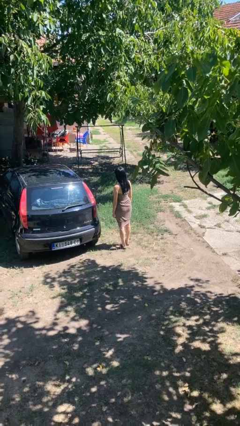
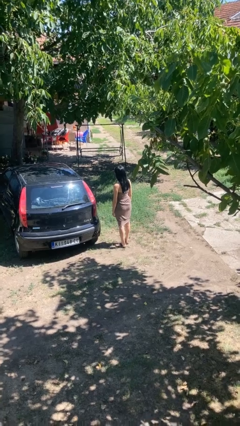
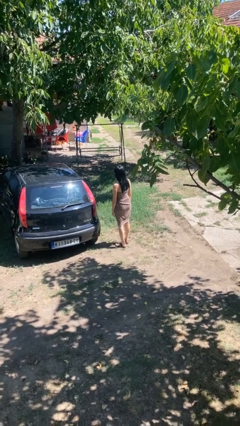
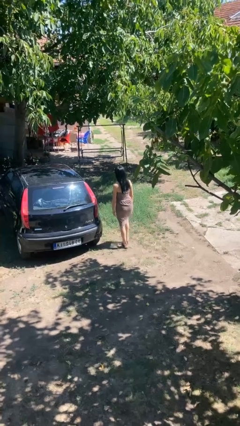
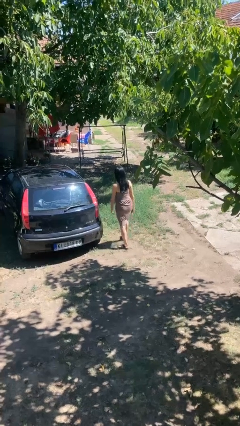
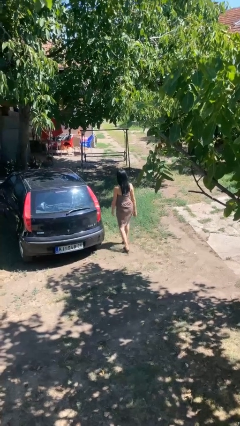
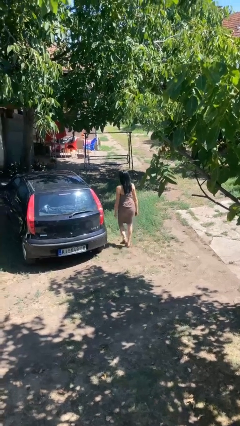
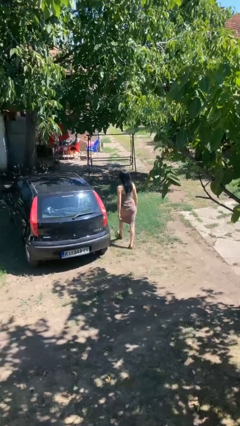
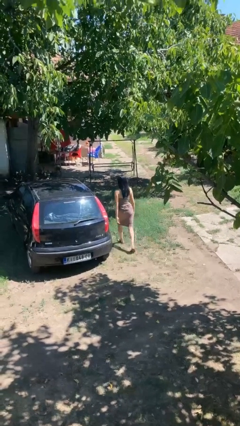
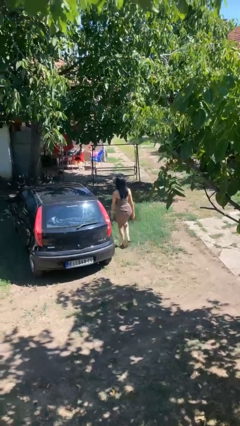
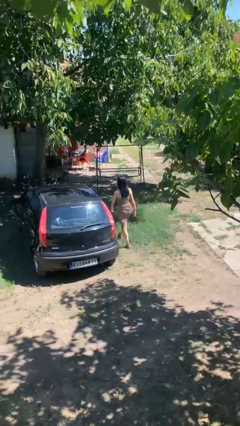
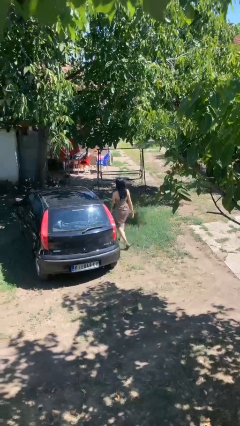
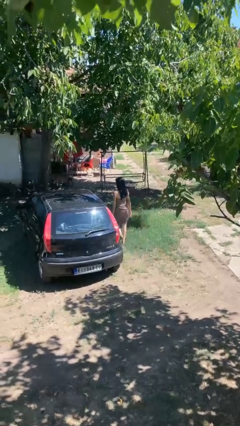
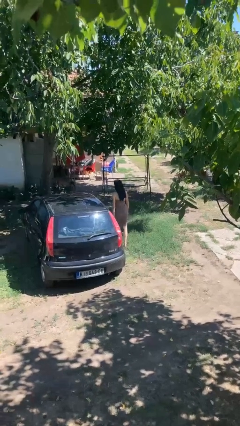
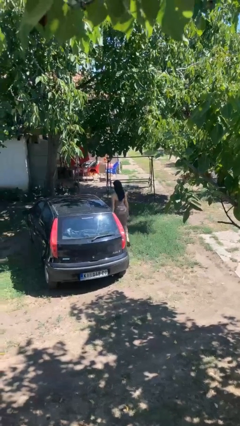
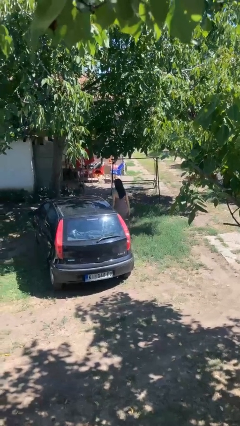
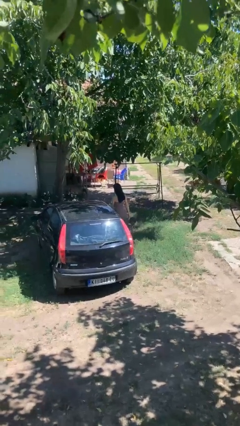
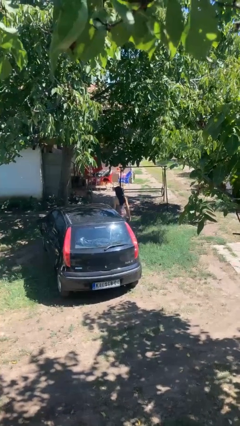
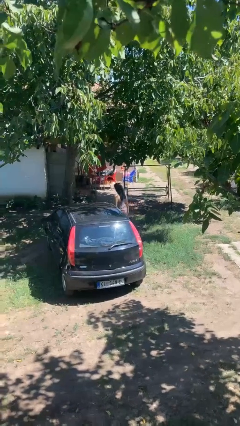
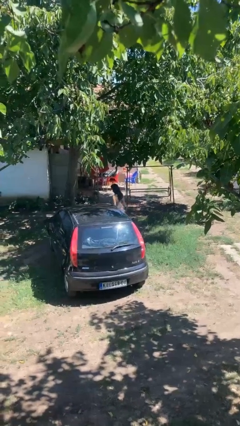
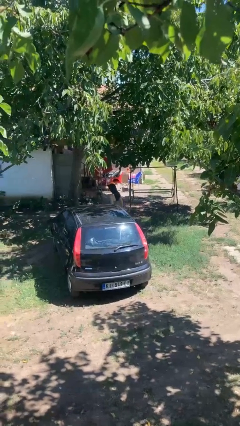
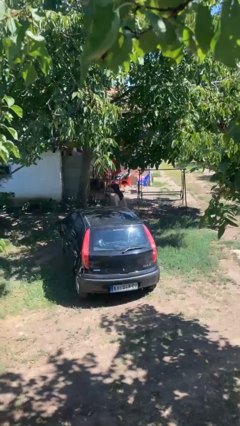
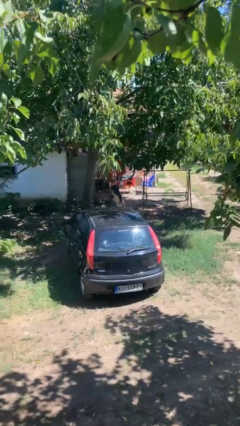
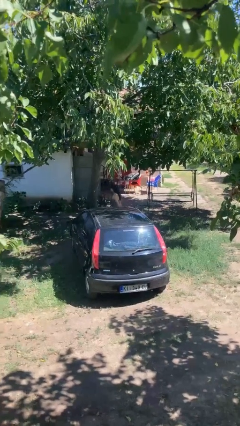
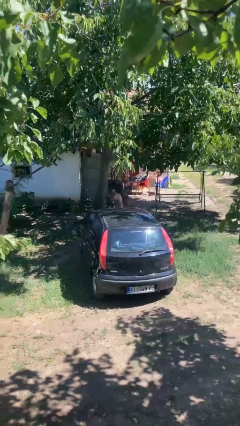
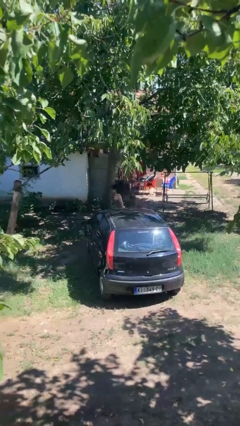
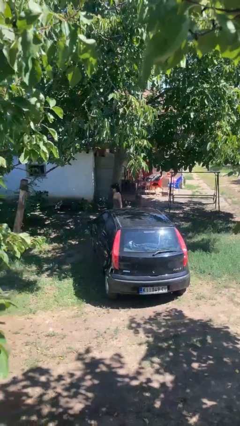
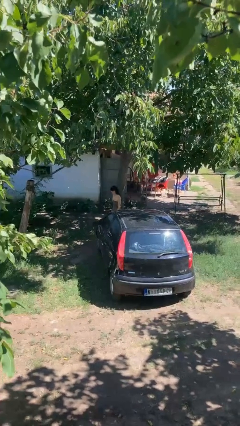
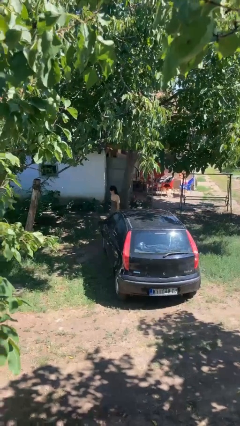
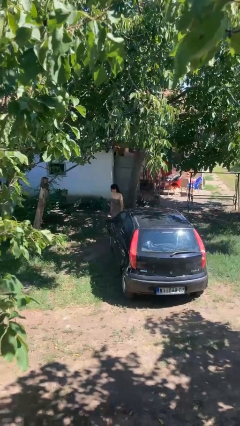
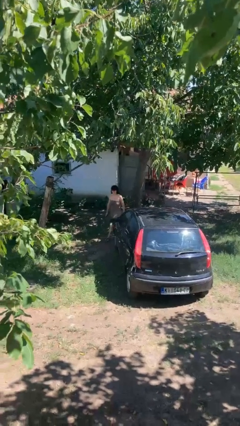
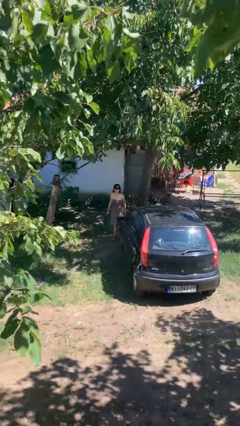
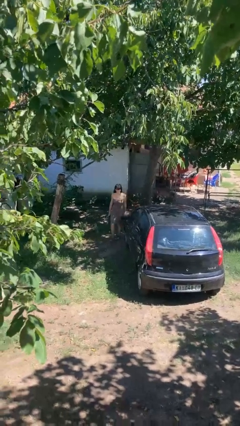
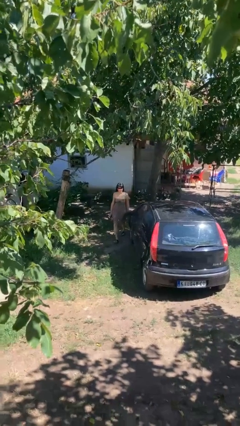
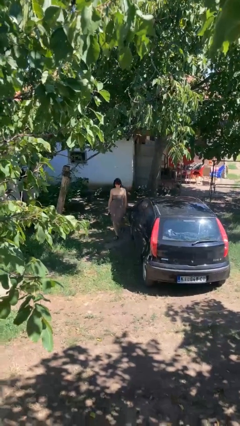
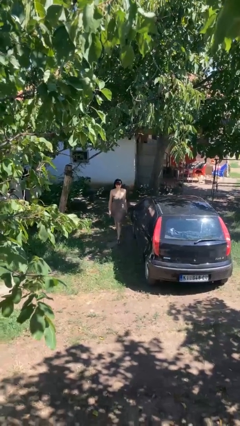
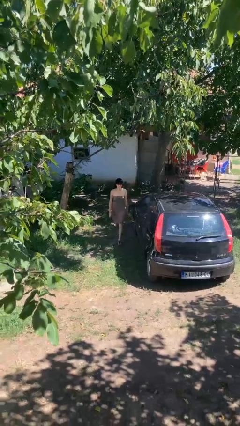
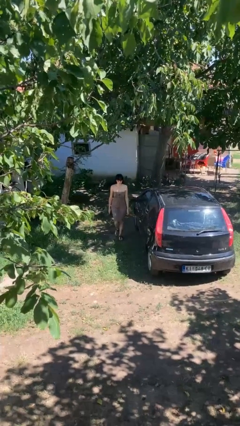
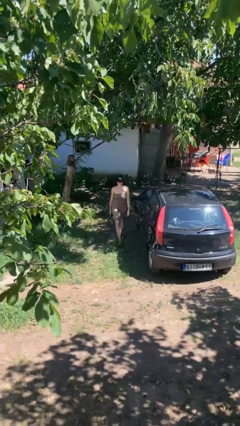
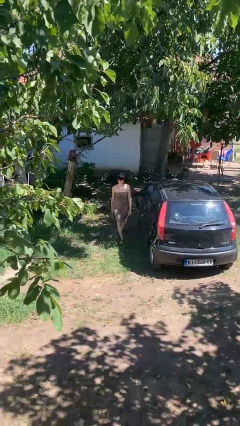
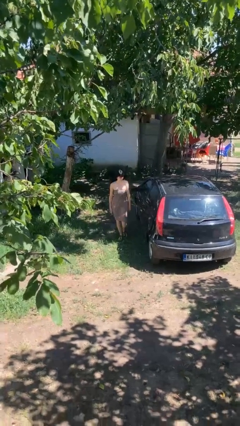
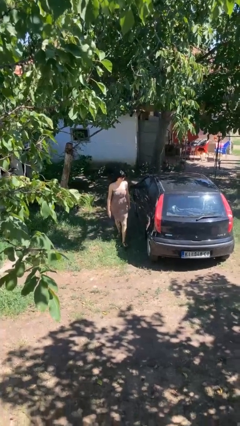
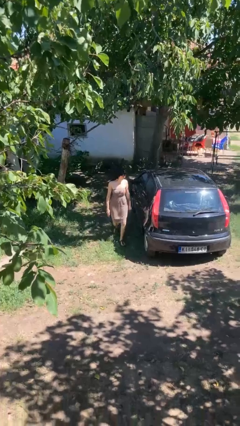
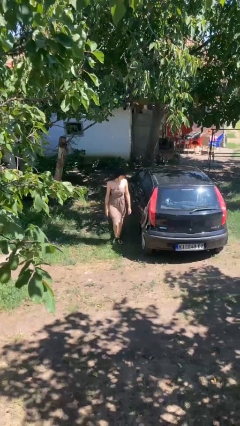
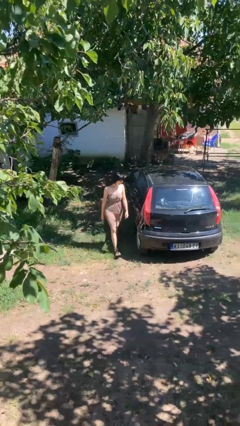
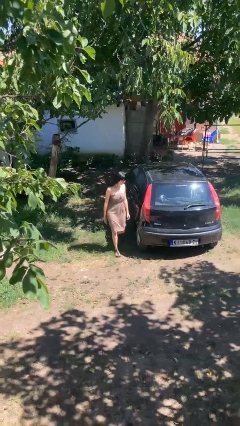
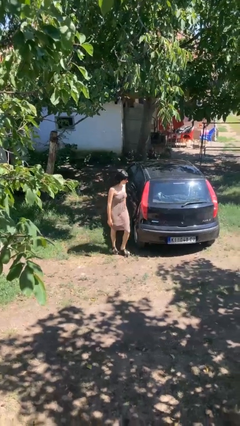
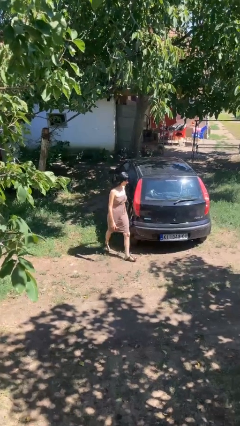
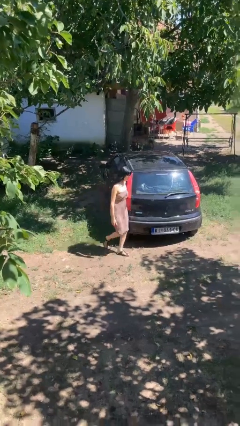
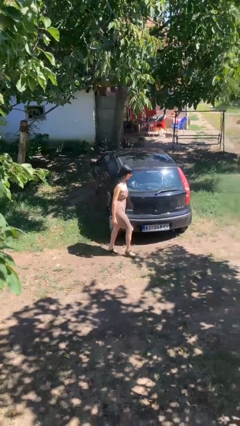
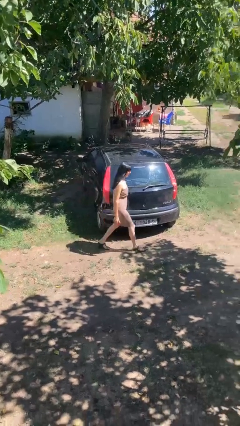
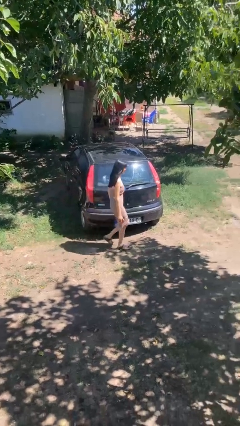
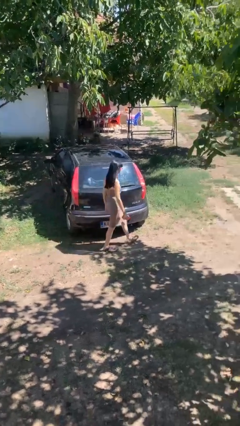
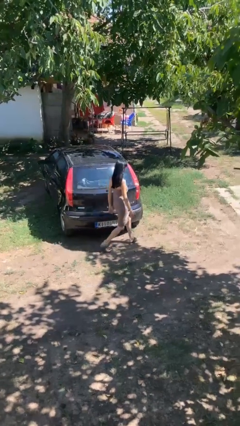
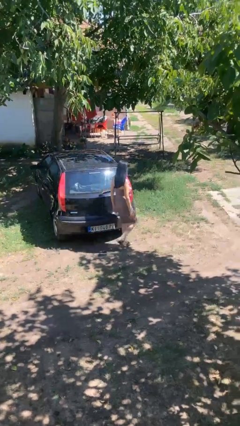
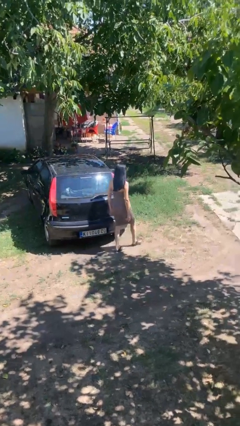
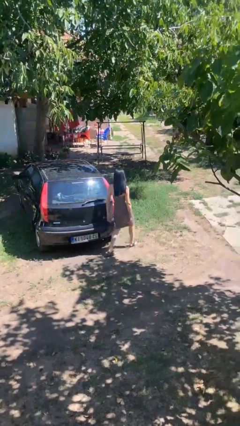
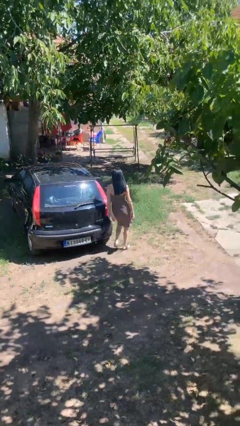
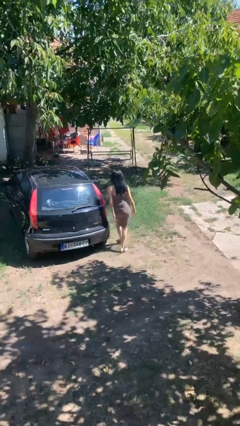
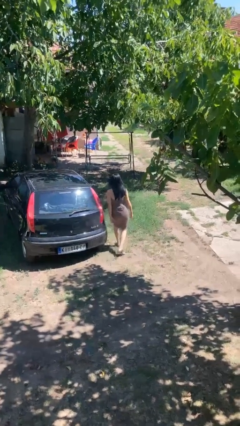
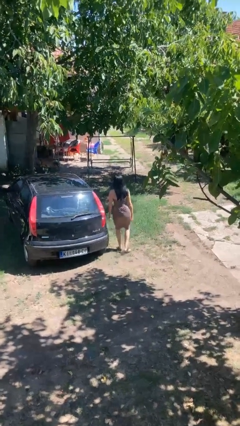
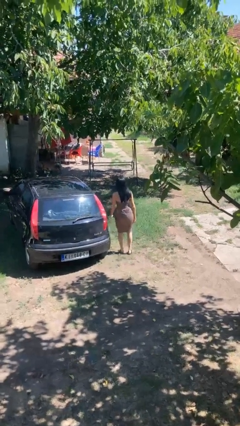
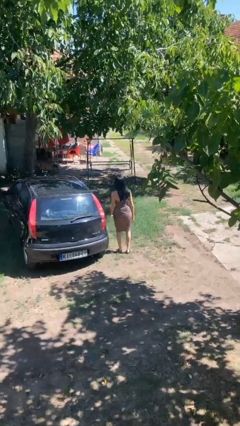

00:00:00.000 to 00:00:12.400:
person walks around car

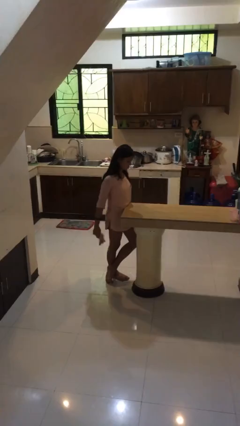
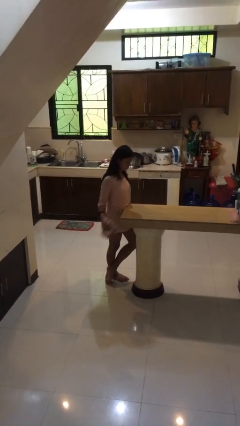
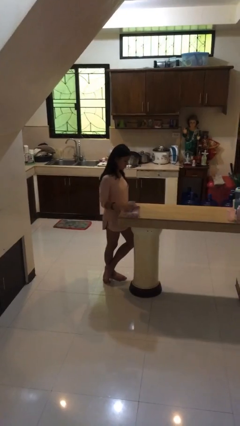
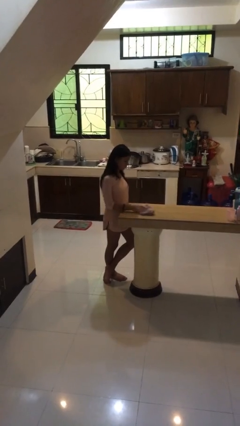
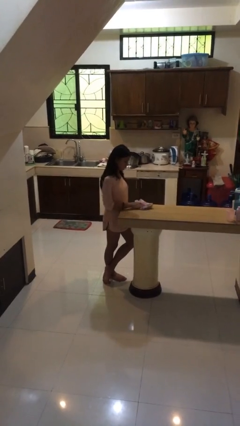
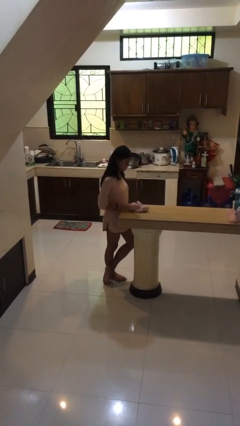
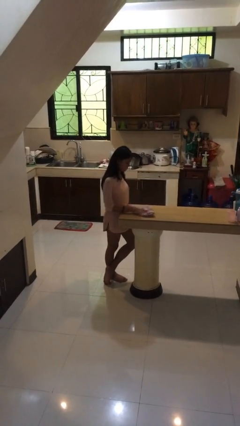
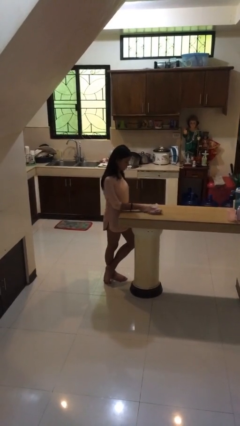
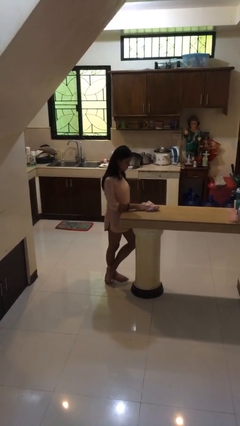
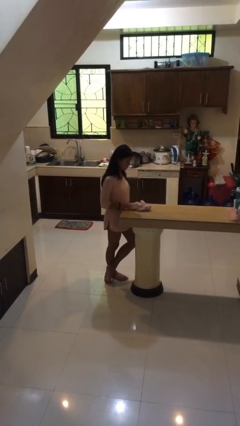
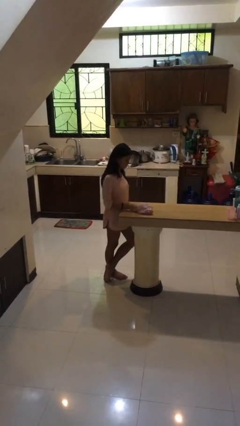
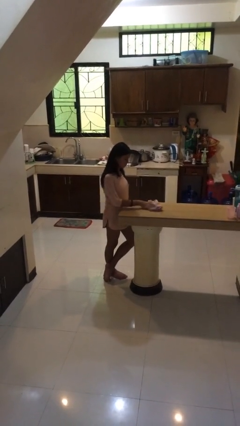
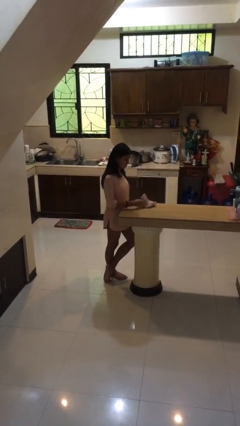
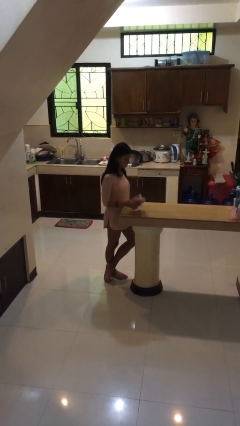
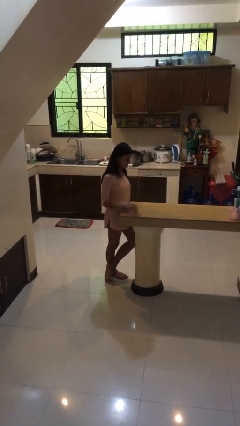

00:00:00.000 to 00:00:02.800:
person cleans table with rag

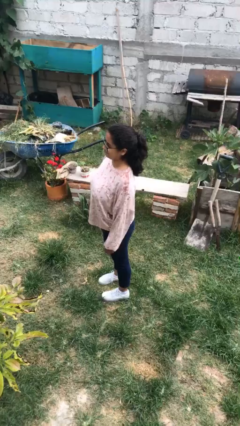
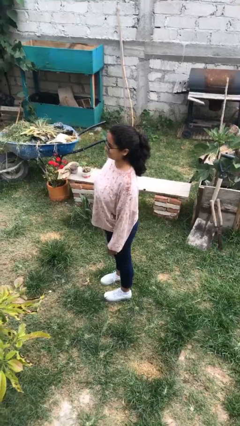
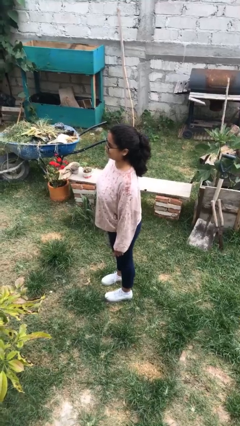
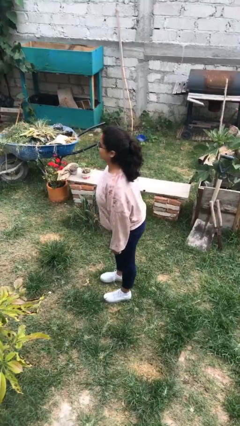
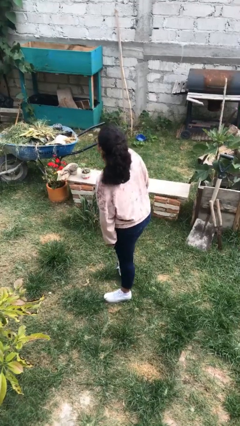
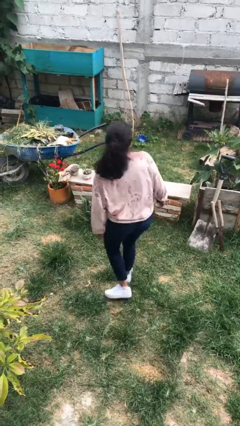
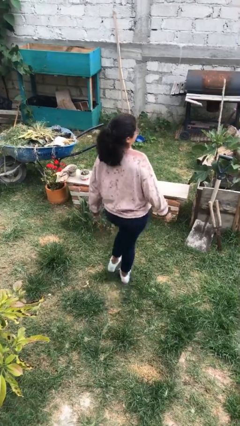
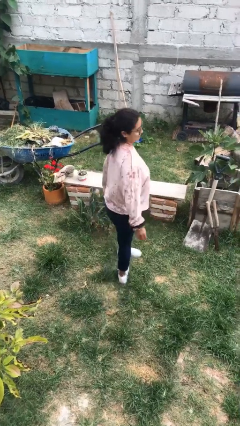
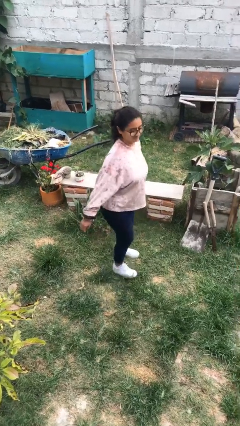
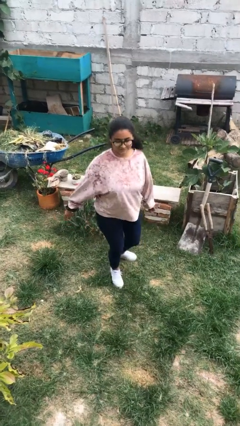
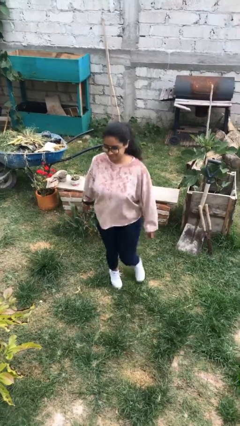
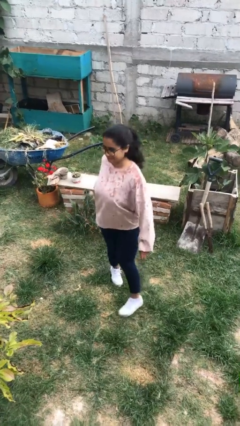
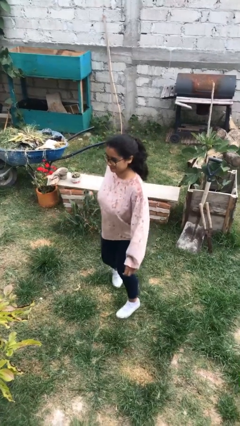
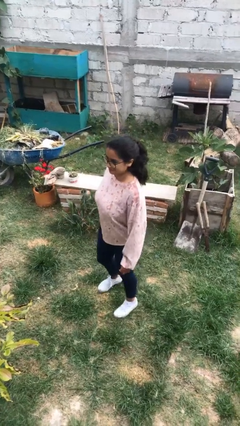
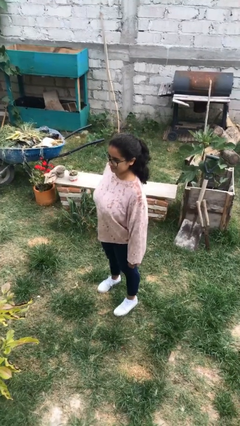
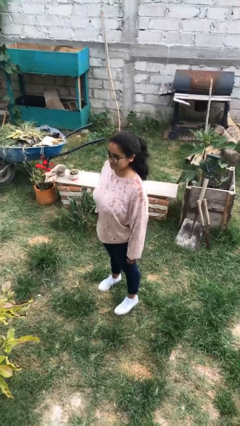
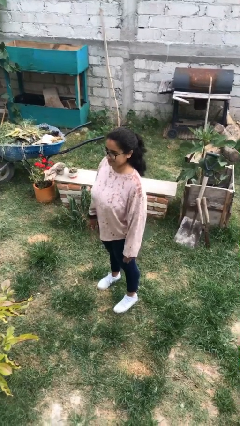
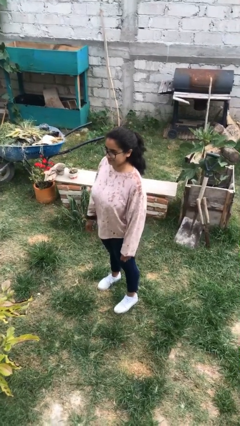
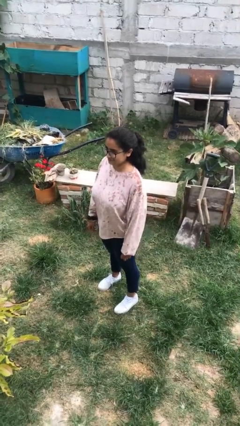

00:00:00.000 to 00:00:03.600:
person twirls
